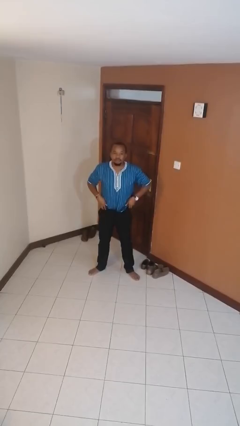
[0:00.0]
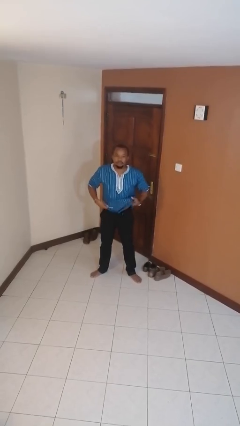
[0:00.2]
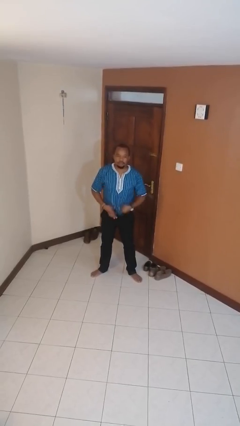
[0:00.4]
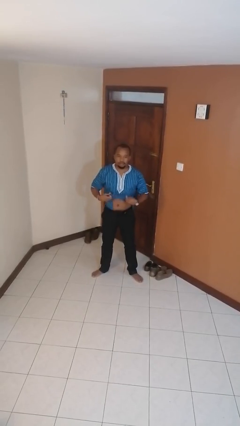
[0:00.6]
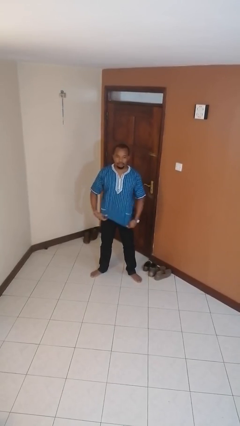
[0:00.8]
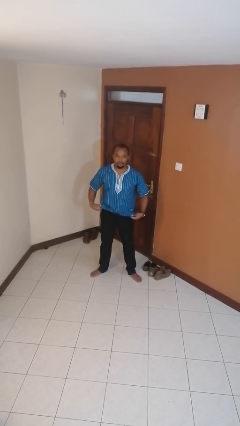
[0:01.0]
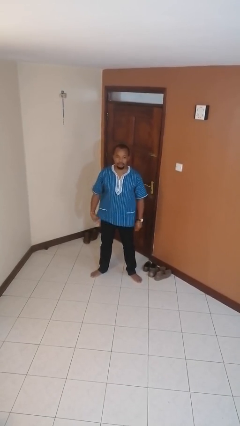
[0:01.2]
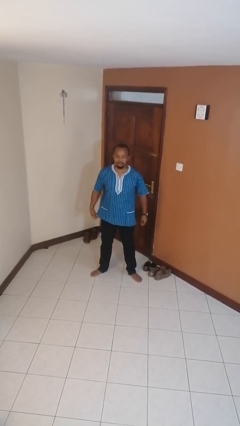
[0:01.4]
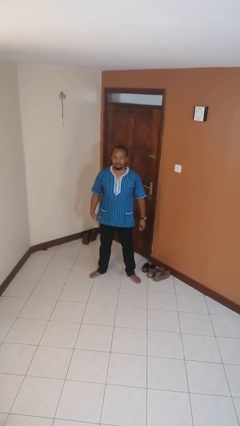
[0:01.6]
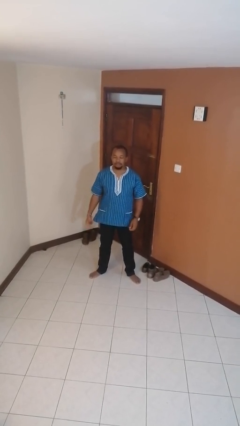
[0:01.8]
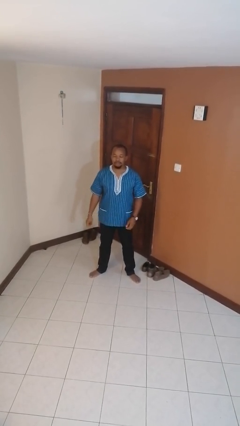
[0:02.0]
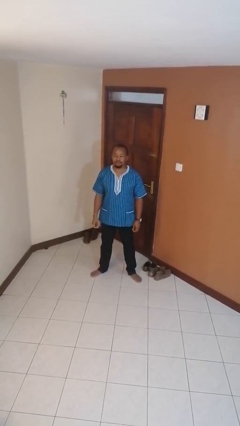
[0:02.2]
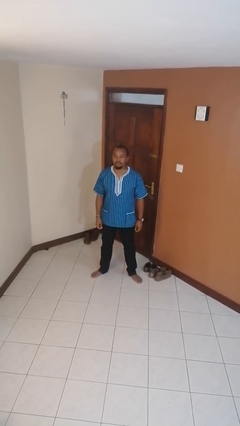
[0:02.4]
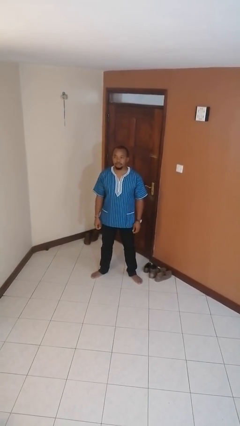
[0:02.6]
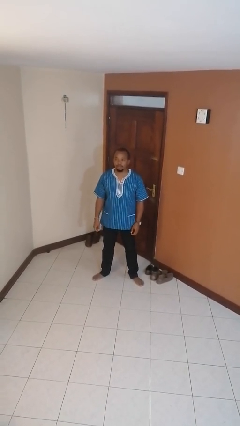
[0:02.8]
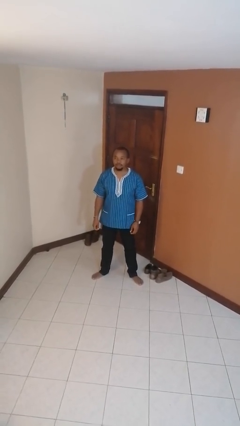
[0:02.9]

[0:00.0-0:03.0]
person untucks shirt

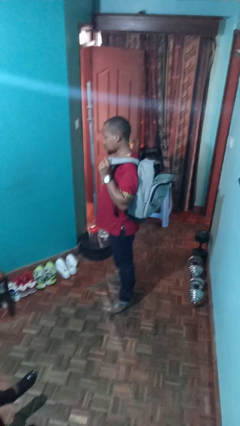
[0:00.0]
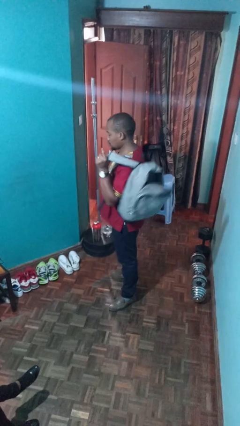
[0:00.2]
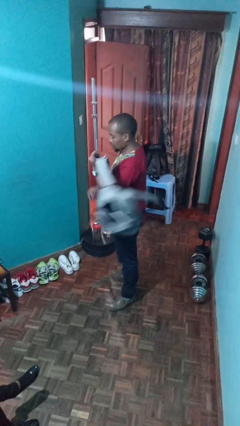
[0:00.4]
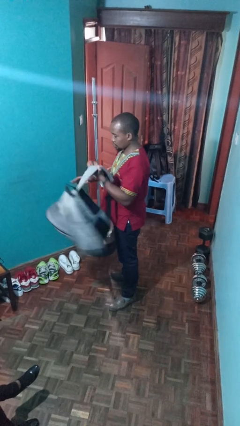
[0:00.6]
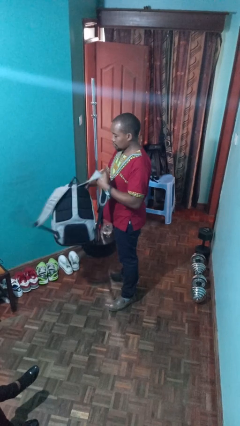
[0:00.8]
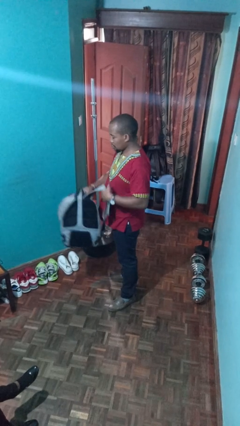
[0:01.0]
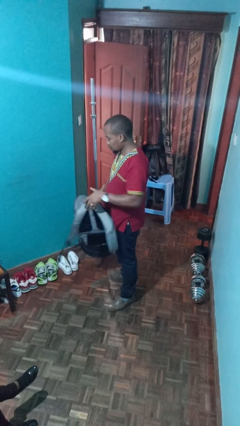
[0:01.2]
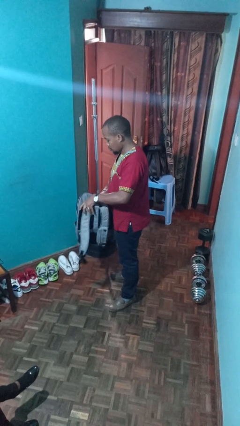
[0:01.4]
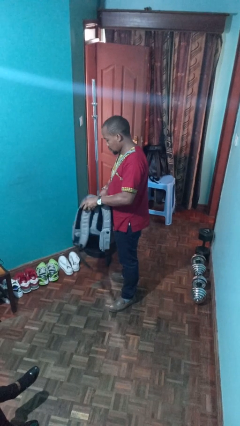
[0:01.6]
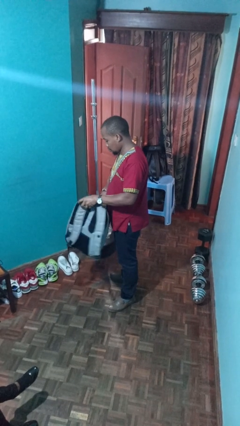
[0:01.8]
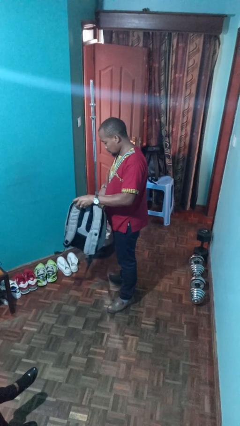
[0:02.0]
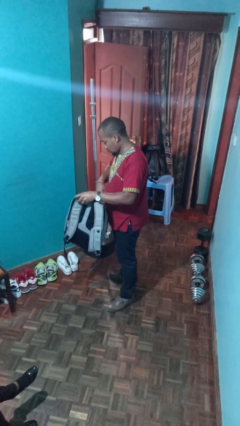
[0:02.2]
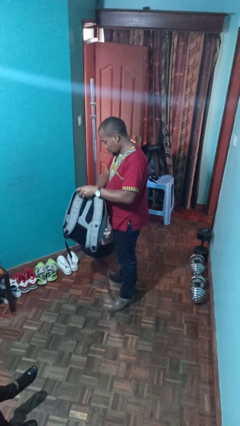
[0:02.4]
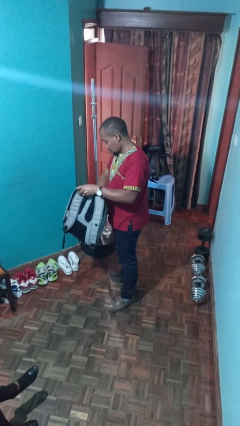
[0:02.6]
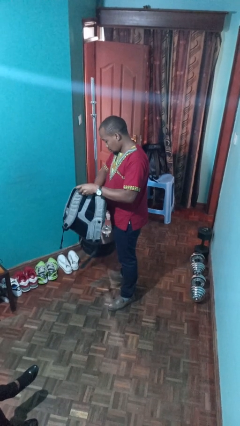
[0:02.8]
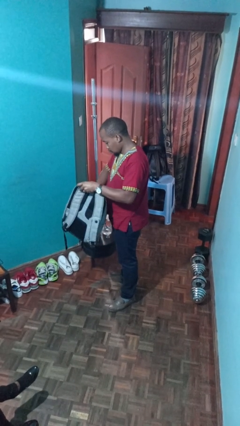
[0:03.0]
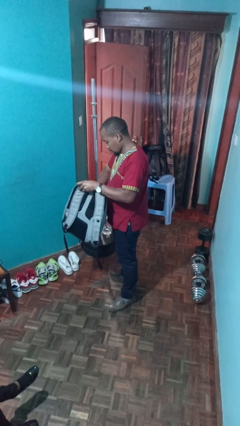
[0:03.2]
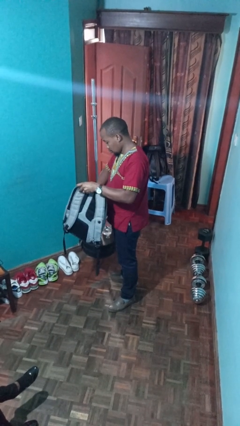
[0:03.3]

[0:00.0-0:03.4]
person searches in backpack

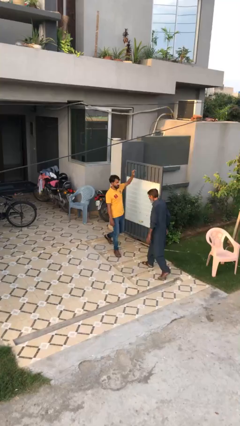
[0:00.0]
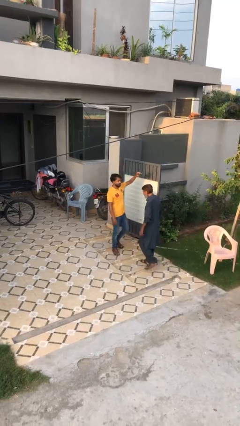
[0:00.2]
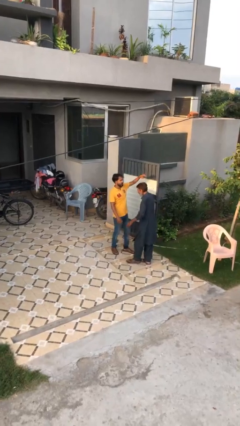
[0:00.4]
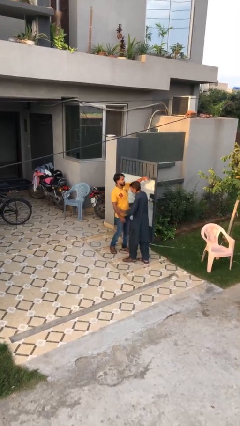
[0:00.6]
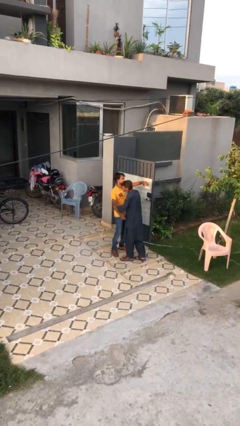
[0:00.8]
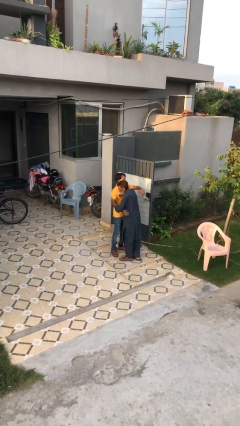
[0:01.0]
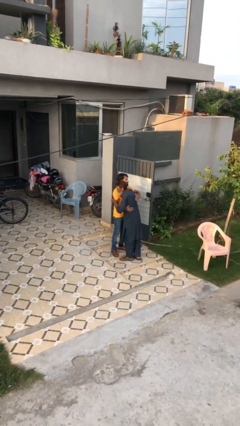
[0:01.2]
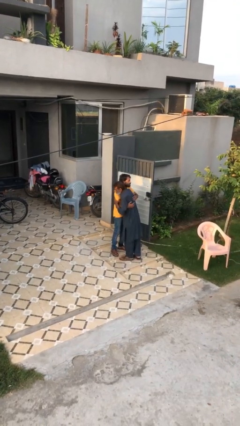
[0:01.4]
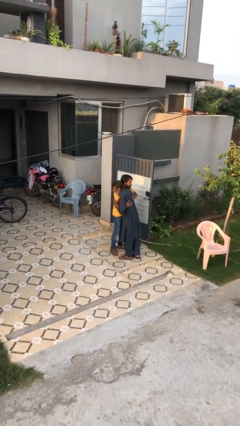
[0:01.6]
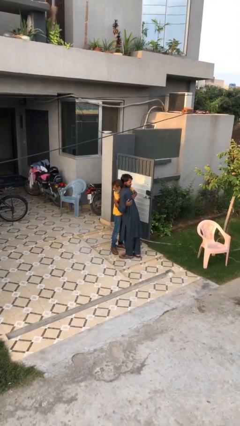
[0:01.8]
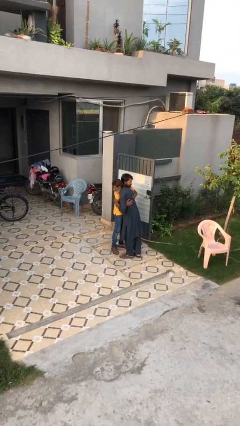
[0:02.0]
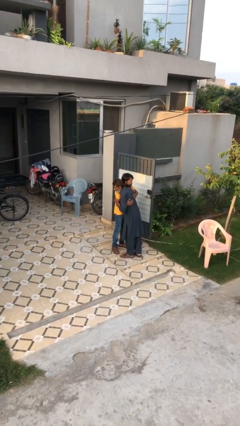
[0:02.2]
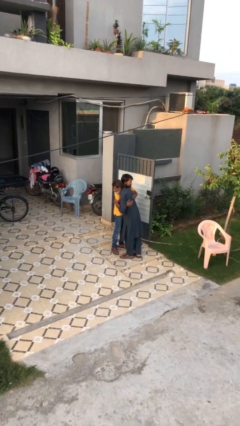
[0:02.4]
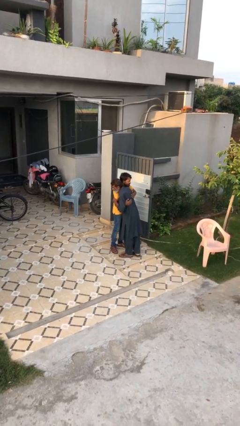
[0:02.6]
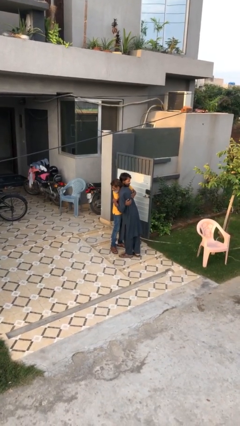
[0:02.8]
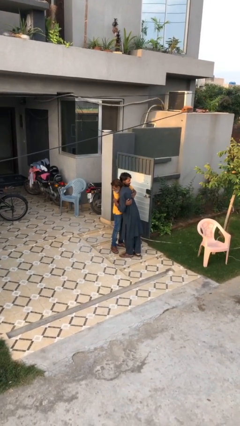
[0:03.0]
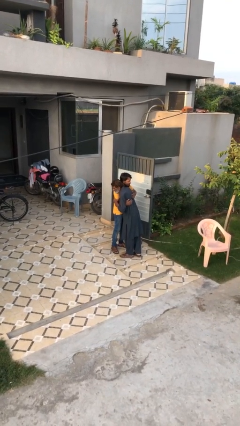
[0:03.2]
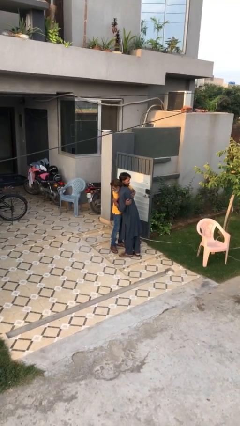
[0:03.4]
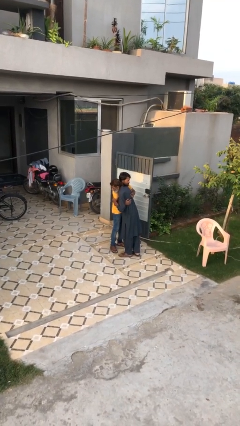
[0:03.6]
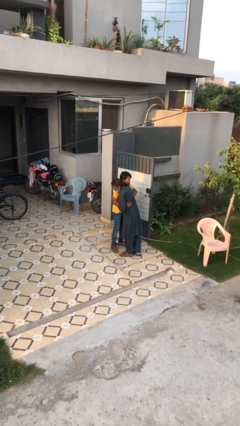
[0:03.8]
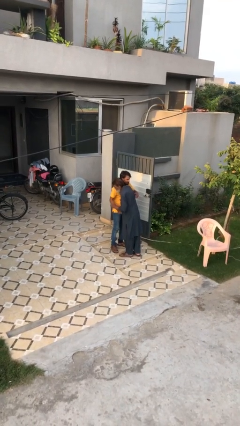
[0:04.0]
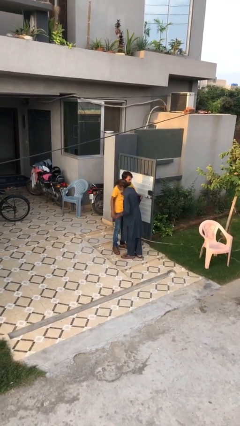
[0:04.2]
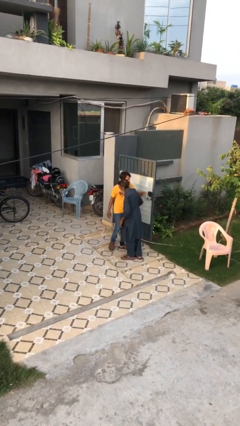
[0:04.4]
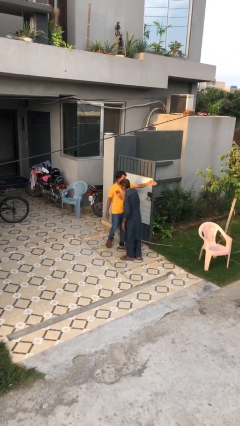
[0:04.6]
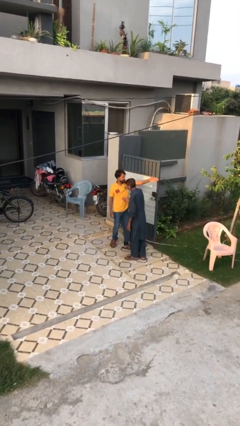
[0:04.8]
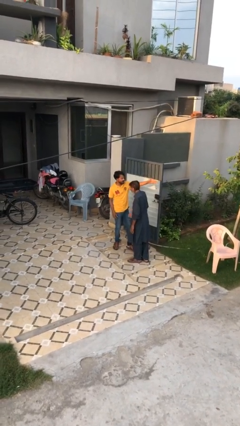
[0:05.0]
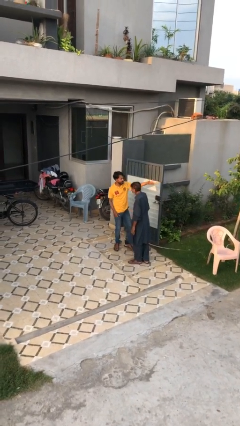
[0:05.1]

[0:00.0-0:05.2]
person embraces person

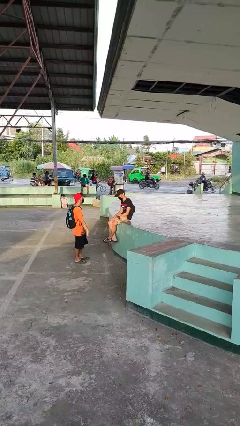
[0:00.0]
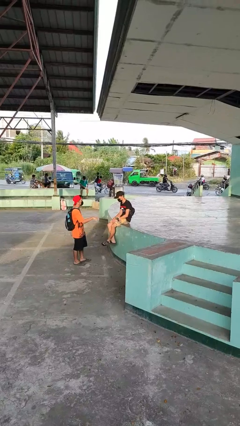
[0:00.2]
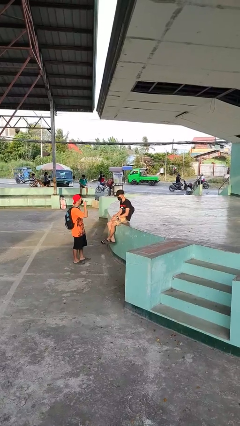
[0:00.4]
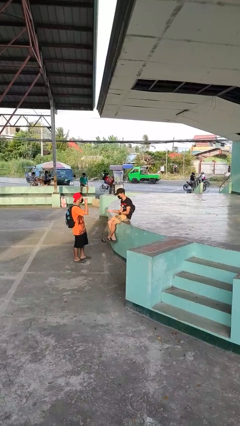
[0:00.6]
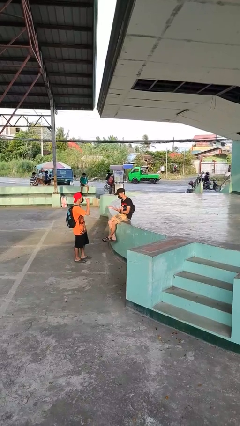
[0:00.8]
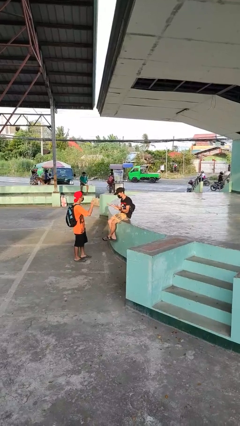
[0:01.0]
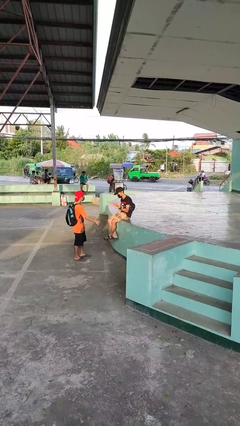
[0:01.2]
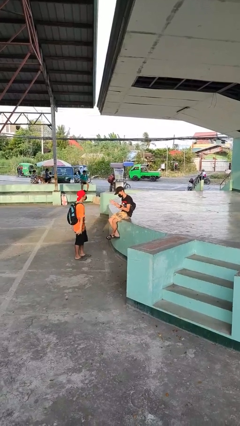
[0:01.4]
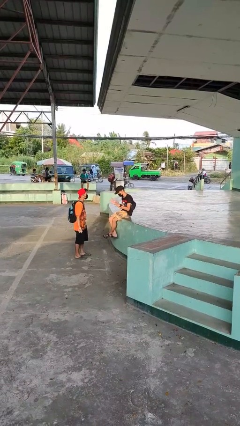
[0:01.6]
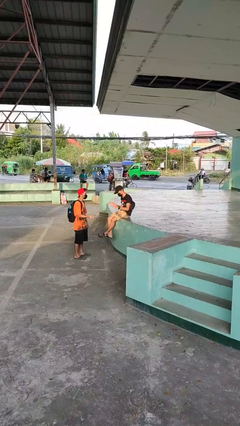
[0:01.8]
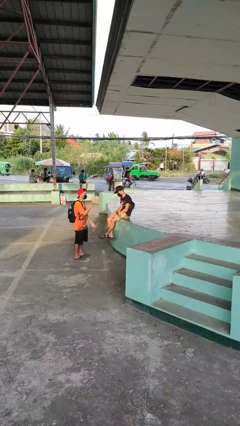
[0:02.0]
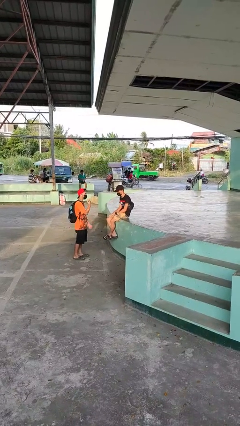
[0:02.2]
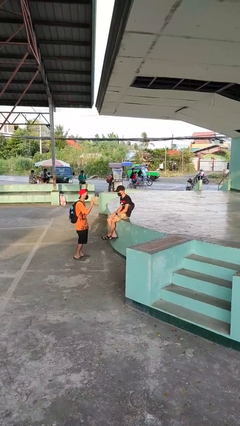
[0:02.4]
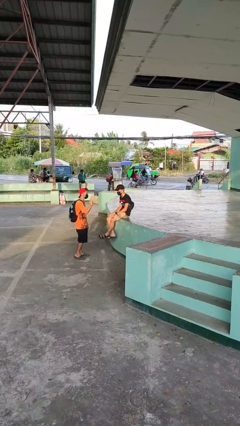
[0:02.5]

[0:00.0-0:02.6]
person talks to person

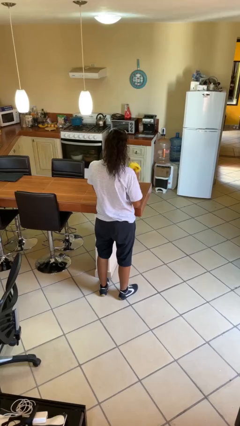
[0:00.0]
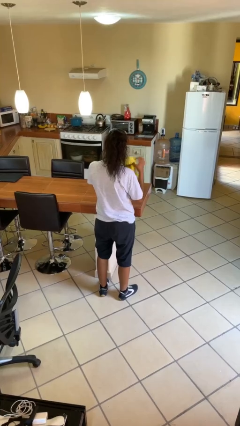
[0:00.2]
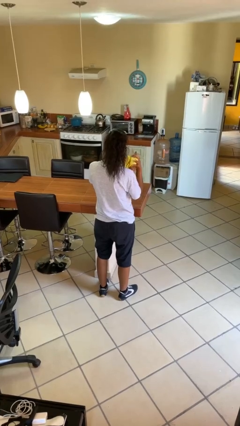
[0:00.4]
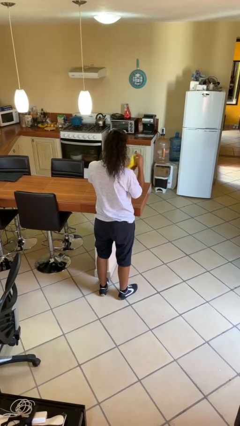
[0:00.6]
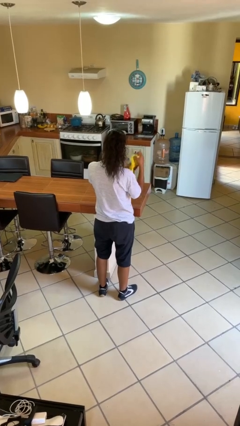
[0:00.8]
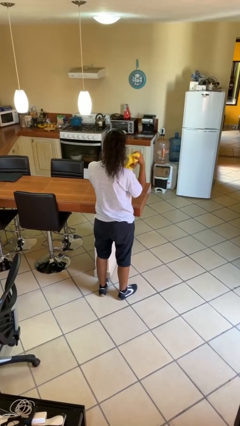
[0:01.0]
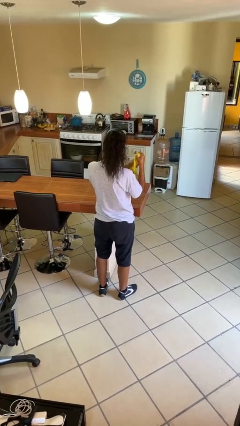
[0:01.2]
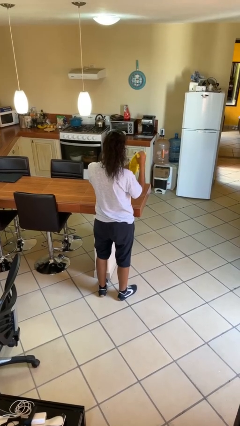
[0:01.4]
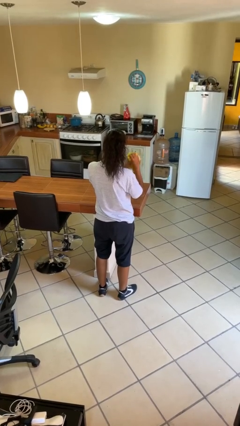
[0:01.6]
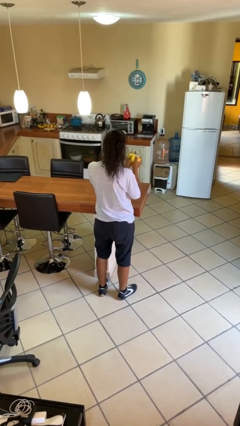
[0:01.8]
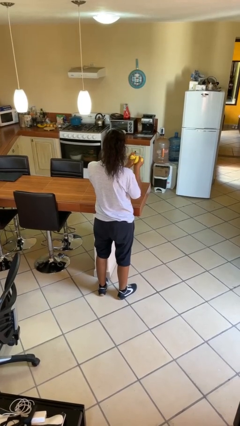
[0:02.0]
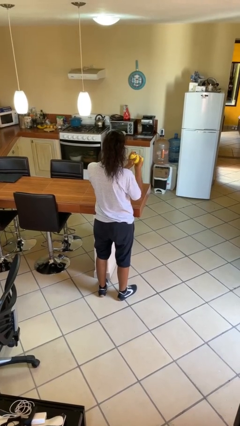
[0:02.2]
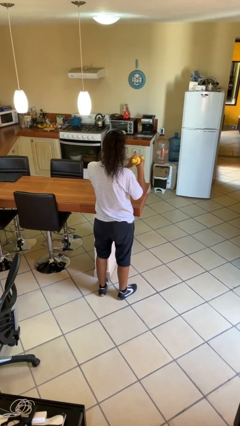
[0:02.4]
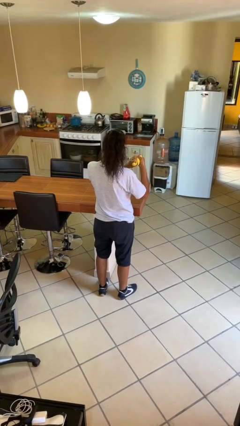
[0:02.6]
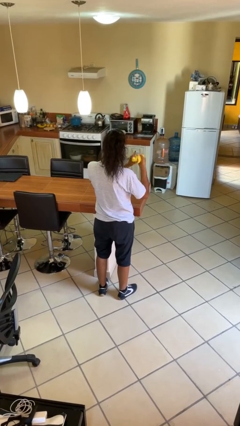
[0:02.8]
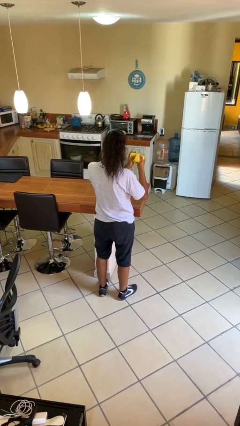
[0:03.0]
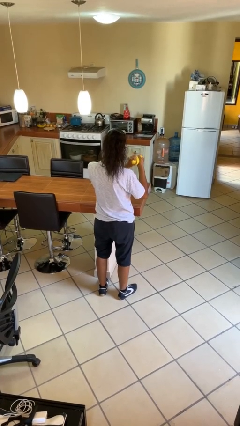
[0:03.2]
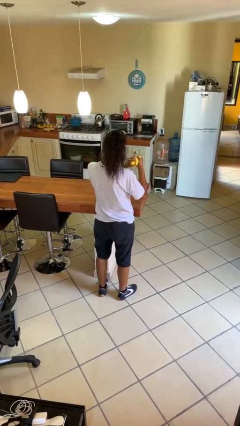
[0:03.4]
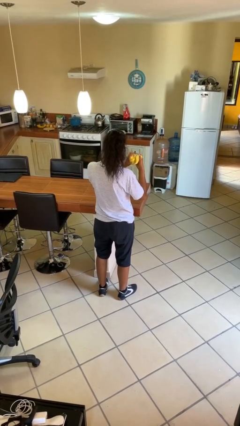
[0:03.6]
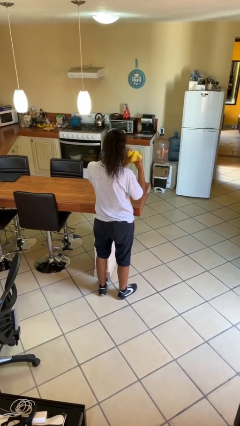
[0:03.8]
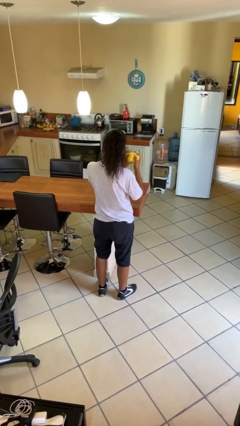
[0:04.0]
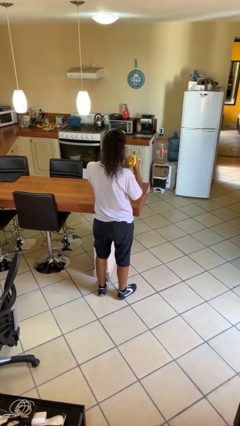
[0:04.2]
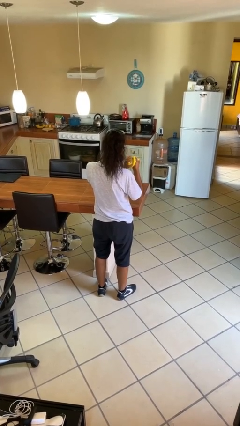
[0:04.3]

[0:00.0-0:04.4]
person squeezes object
